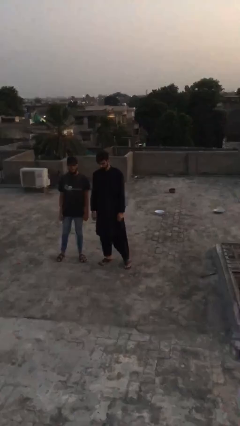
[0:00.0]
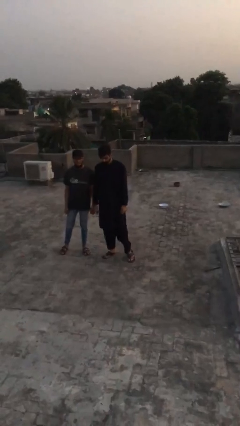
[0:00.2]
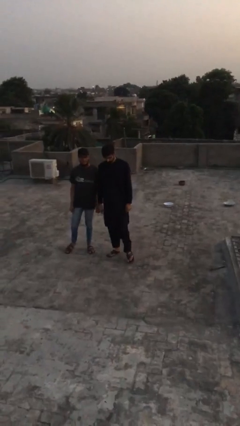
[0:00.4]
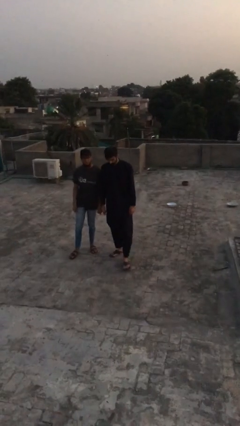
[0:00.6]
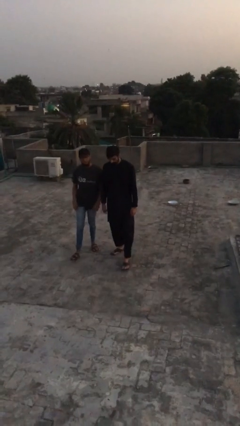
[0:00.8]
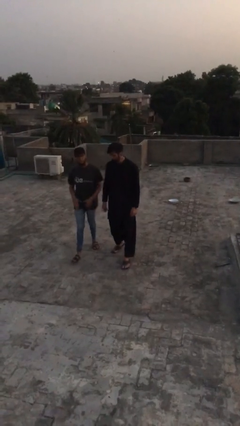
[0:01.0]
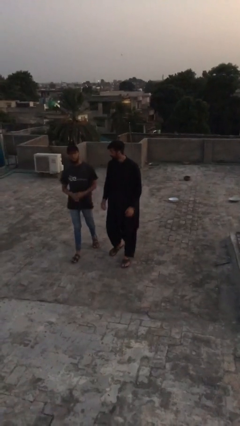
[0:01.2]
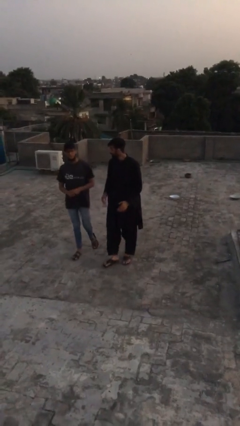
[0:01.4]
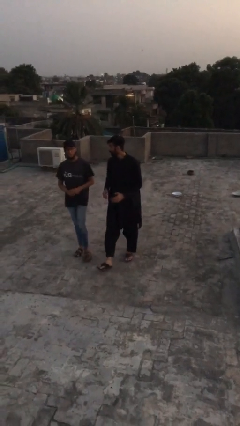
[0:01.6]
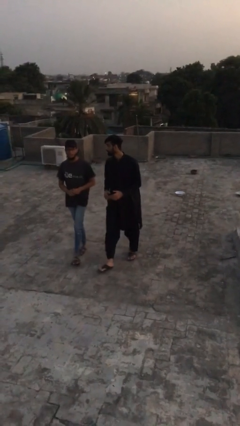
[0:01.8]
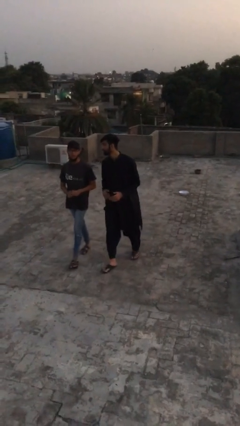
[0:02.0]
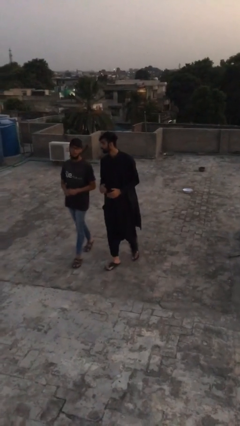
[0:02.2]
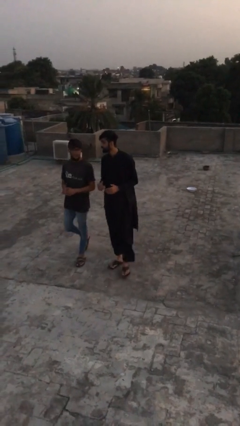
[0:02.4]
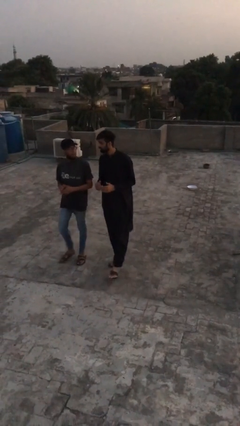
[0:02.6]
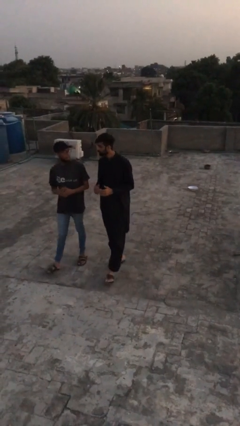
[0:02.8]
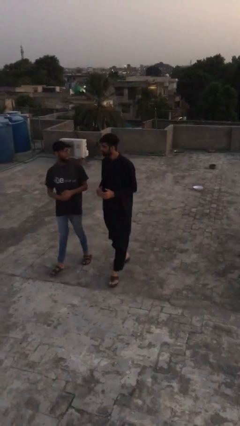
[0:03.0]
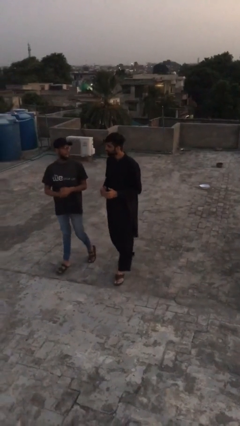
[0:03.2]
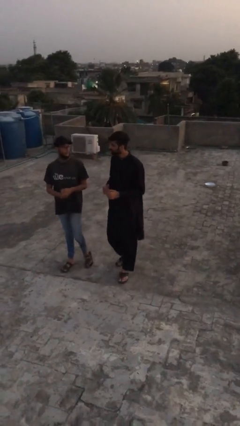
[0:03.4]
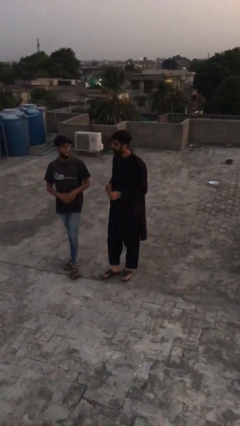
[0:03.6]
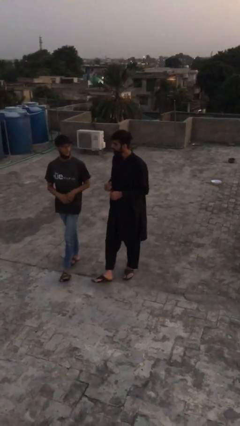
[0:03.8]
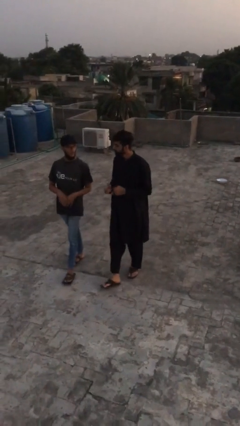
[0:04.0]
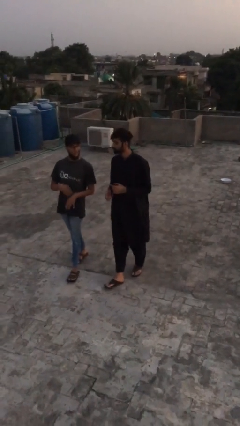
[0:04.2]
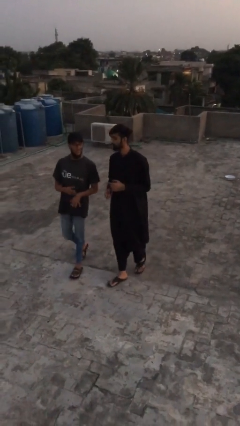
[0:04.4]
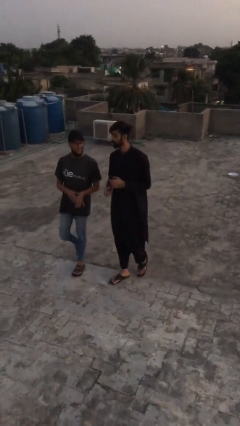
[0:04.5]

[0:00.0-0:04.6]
person talks to person

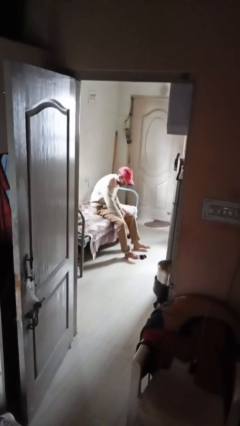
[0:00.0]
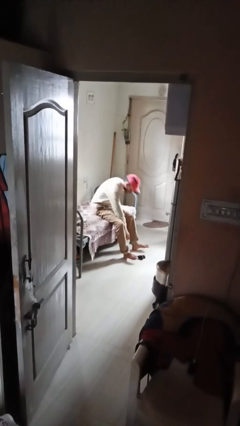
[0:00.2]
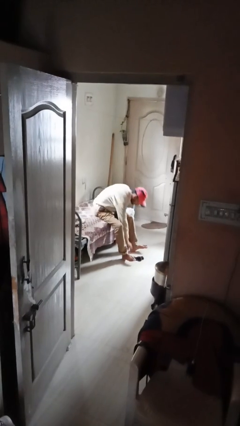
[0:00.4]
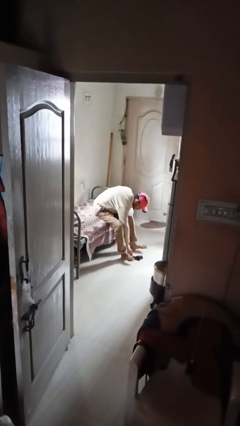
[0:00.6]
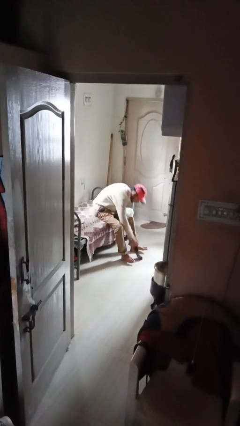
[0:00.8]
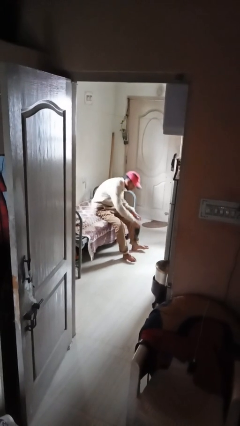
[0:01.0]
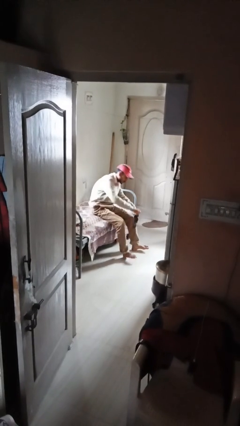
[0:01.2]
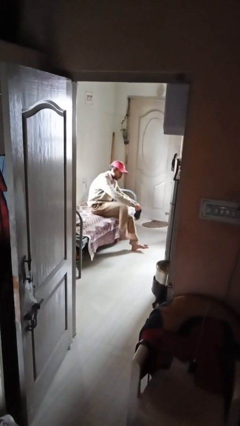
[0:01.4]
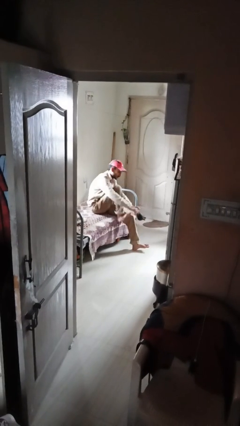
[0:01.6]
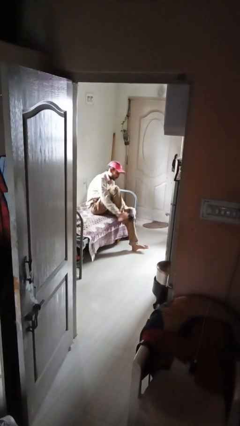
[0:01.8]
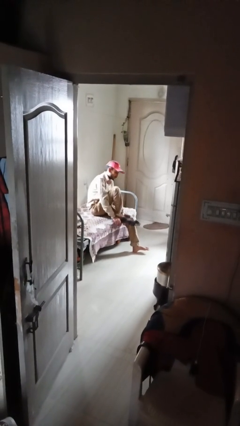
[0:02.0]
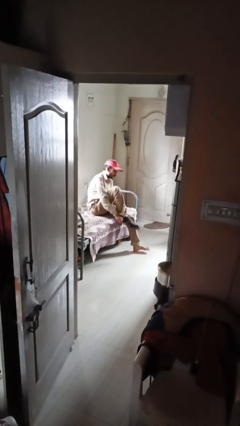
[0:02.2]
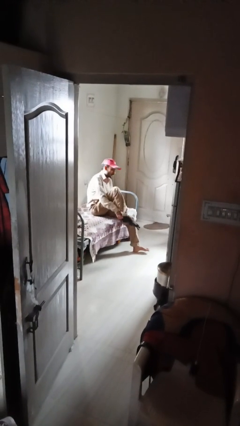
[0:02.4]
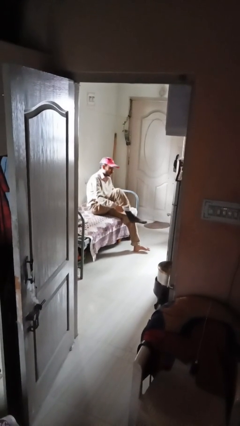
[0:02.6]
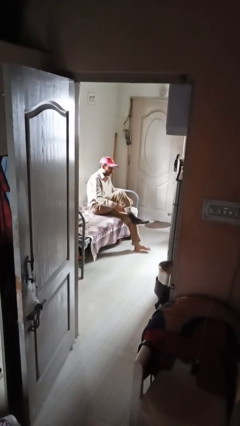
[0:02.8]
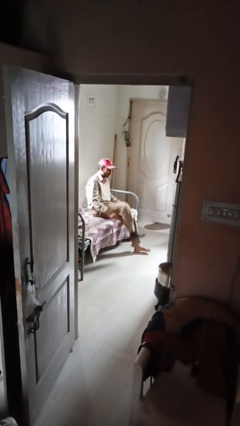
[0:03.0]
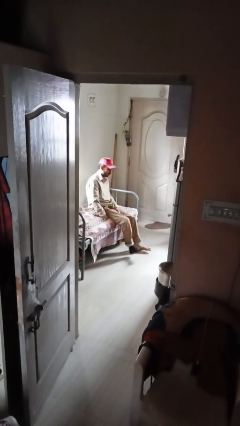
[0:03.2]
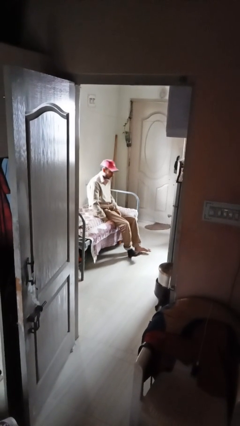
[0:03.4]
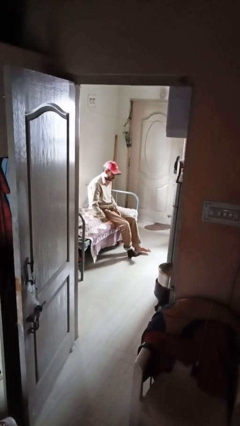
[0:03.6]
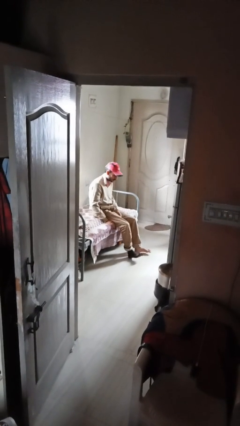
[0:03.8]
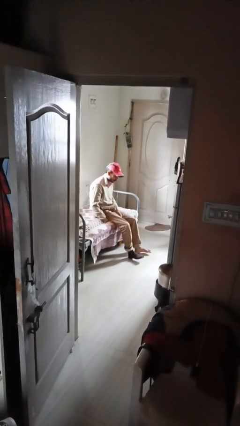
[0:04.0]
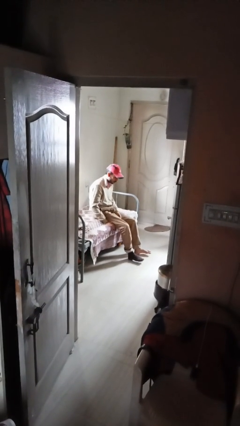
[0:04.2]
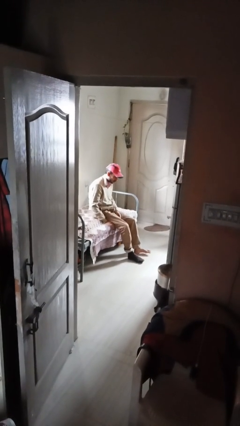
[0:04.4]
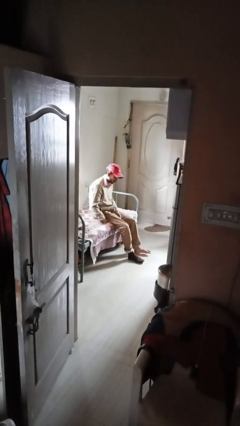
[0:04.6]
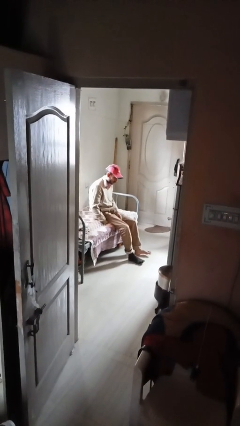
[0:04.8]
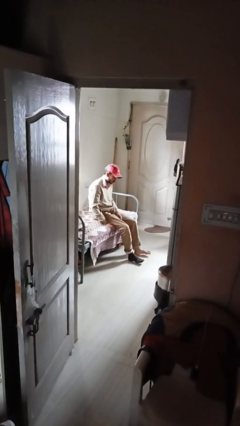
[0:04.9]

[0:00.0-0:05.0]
person puts on socks

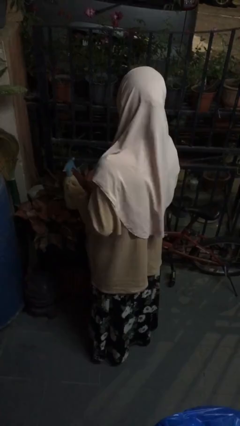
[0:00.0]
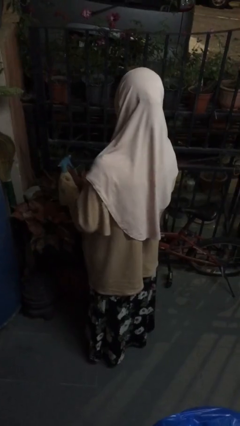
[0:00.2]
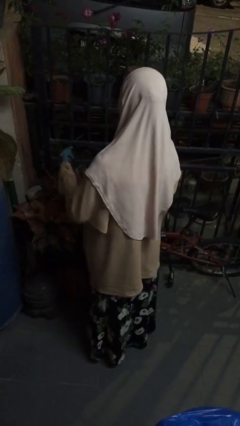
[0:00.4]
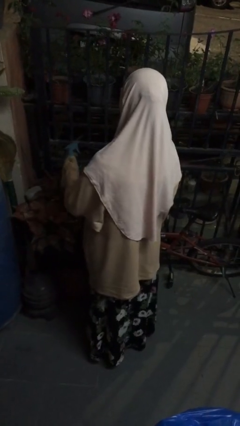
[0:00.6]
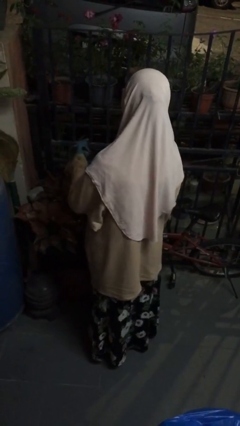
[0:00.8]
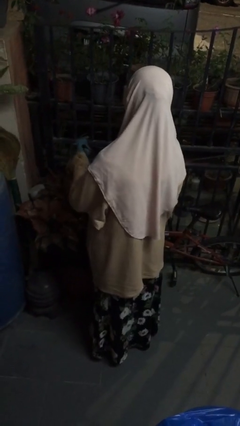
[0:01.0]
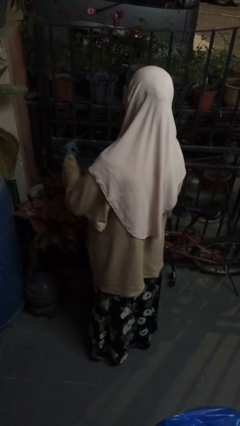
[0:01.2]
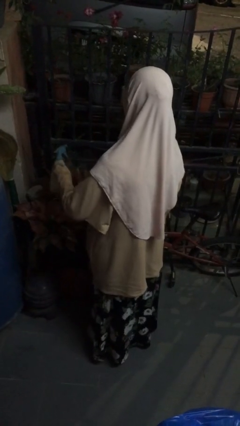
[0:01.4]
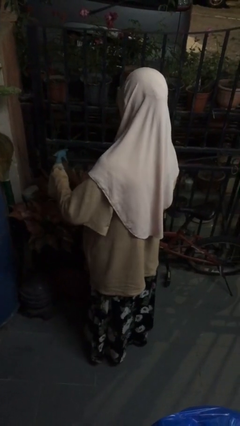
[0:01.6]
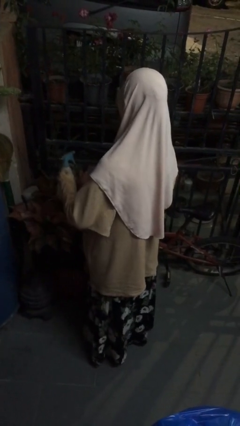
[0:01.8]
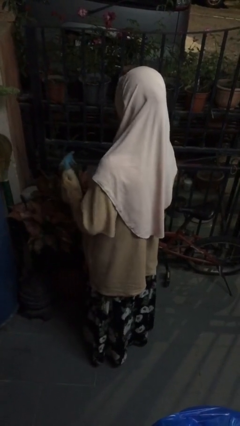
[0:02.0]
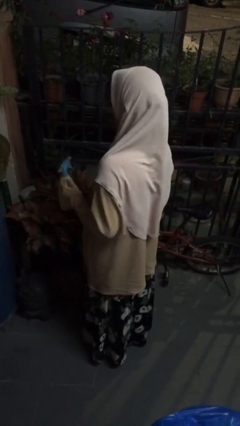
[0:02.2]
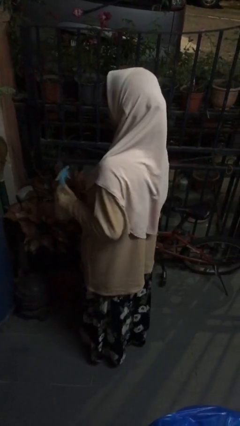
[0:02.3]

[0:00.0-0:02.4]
person waters houseplant

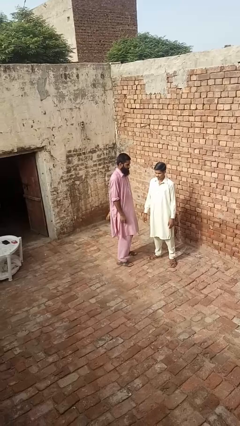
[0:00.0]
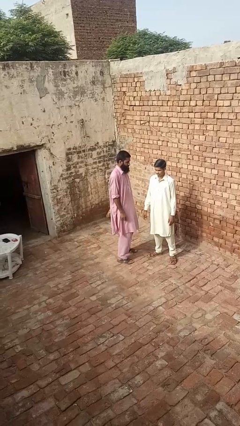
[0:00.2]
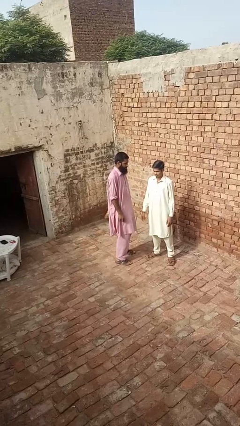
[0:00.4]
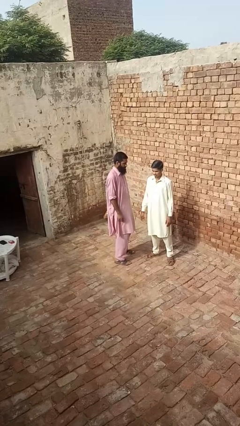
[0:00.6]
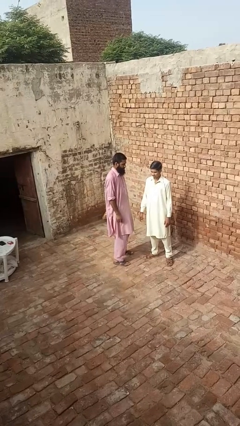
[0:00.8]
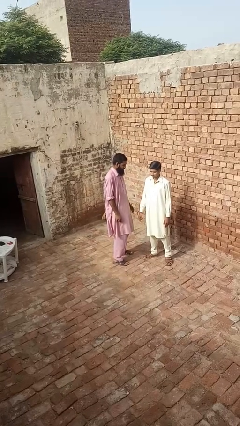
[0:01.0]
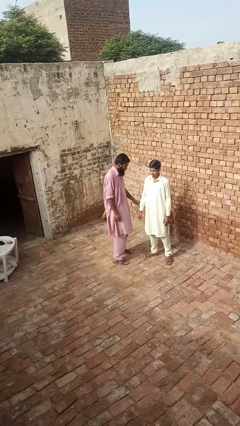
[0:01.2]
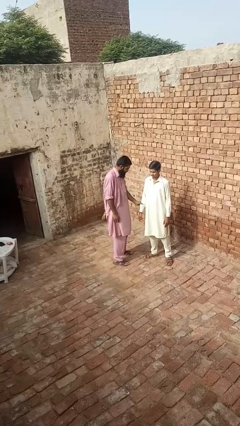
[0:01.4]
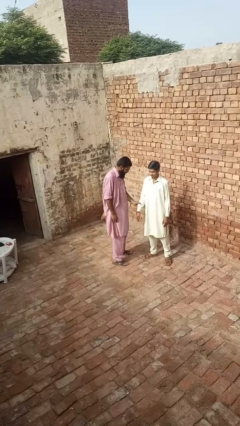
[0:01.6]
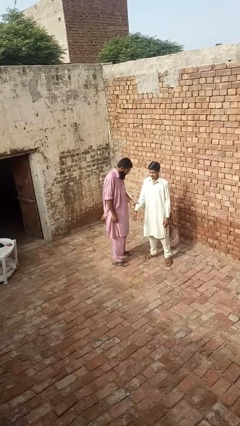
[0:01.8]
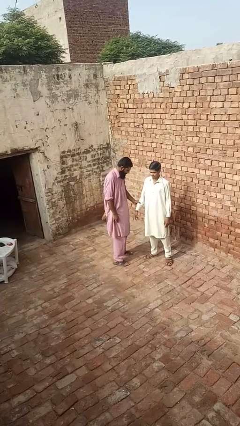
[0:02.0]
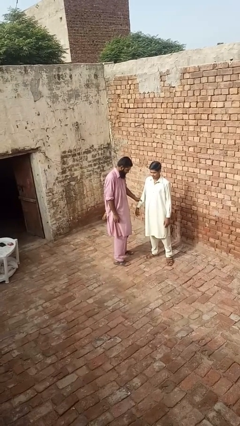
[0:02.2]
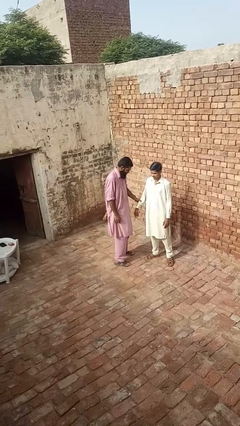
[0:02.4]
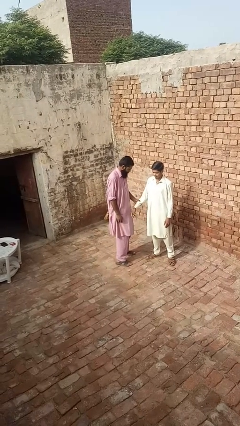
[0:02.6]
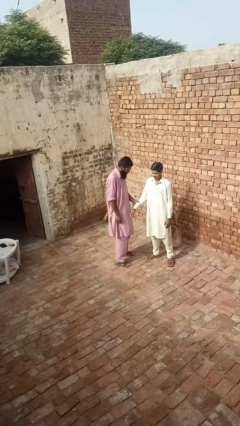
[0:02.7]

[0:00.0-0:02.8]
person grabs person by forearm

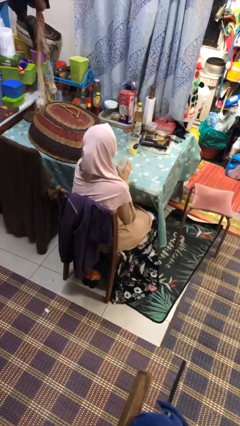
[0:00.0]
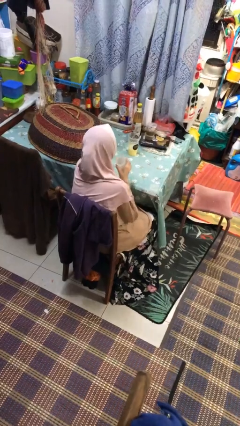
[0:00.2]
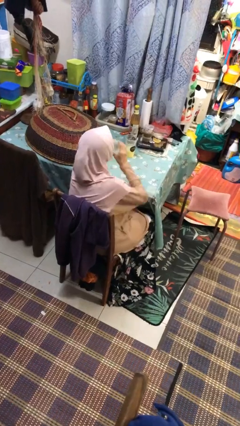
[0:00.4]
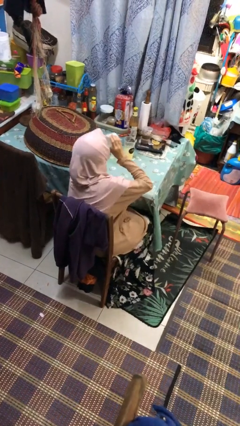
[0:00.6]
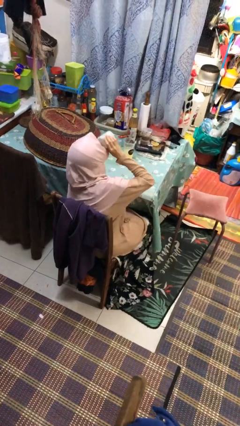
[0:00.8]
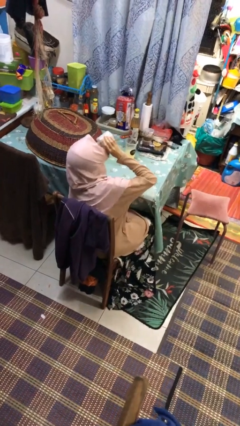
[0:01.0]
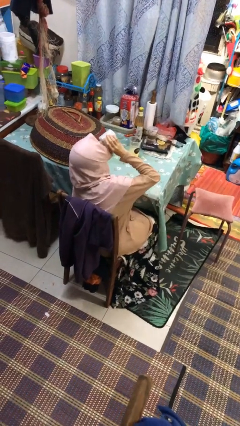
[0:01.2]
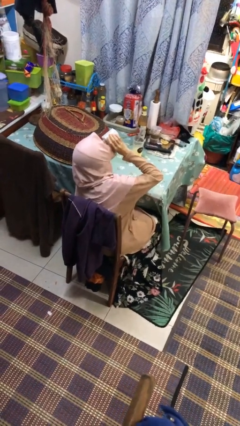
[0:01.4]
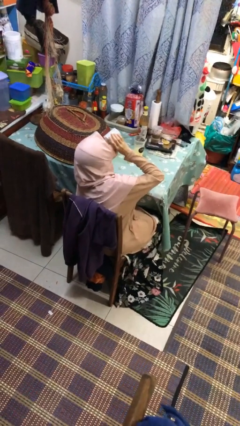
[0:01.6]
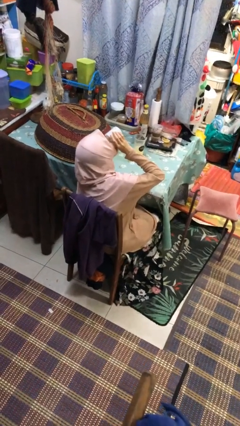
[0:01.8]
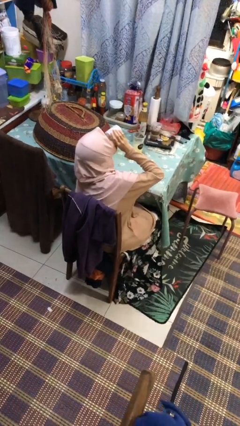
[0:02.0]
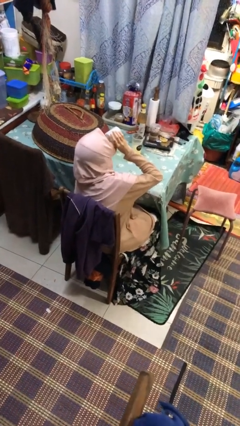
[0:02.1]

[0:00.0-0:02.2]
person drinks from shotglass
